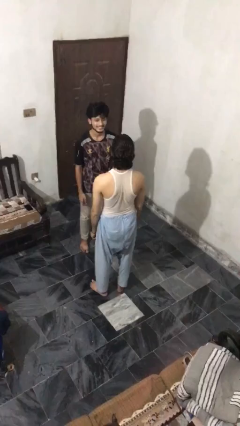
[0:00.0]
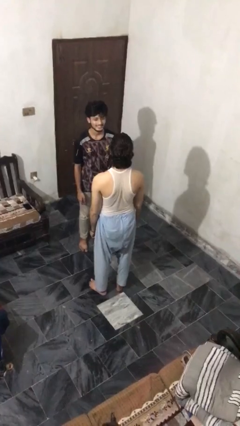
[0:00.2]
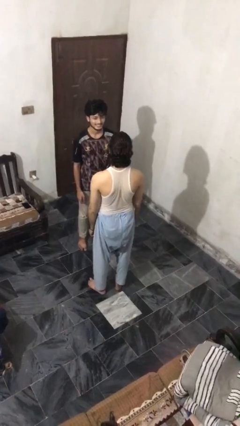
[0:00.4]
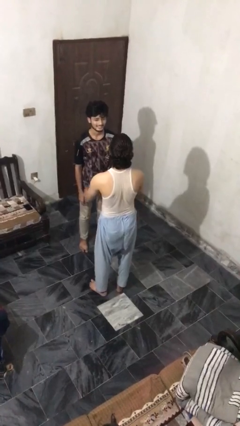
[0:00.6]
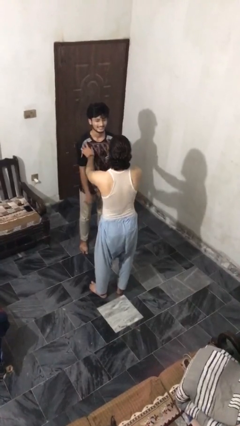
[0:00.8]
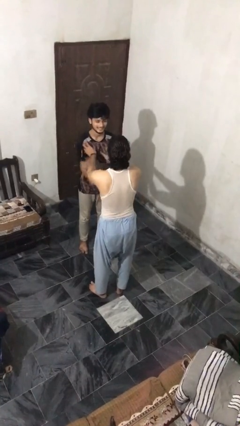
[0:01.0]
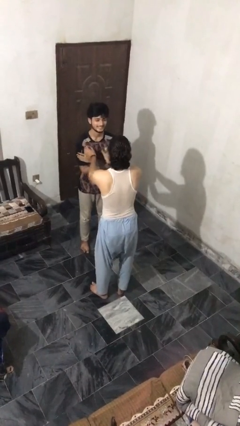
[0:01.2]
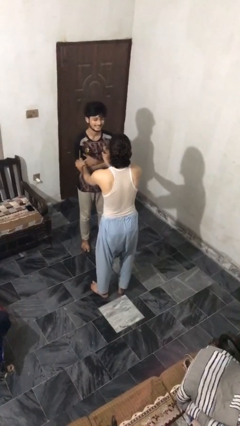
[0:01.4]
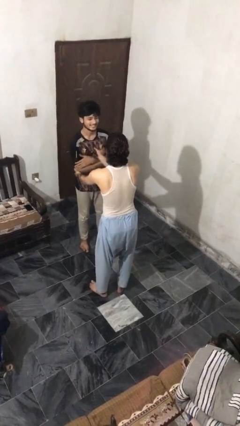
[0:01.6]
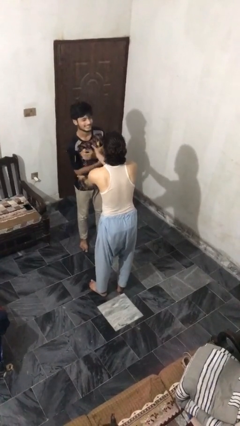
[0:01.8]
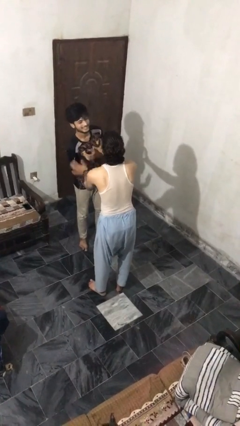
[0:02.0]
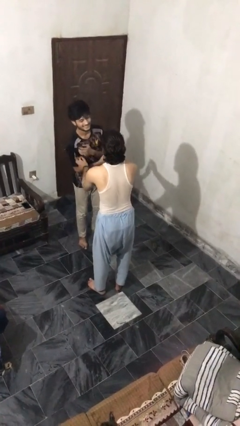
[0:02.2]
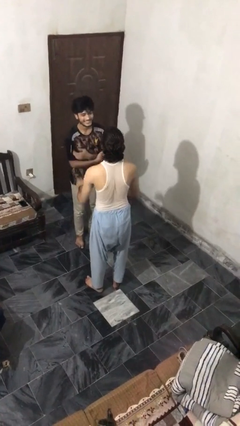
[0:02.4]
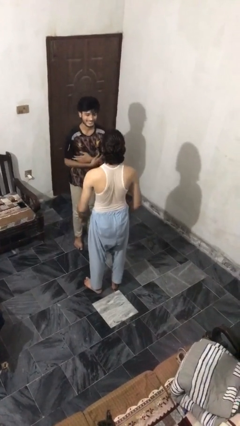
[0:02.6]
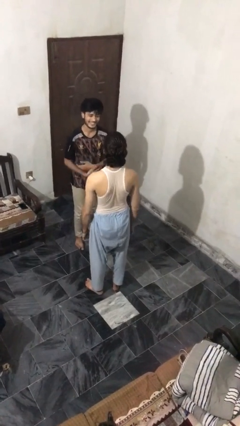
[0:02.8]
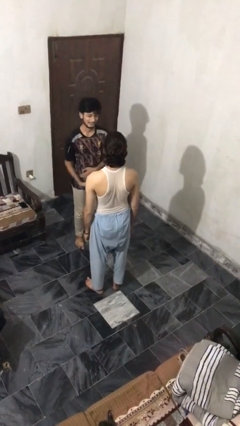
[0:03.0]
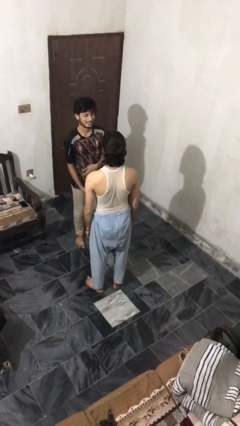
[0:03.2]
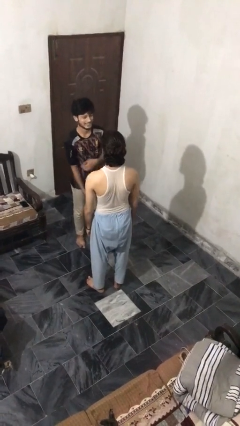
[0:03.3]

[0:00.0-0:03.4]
person tickles person

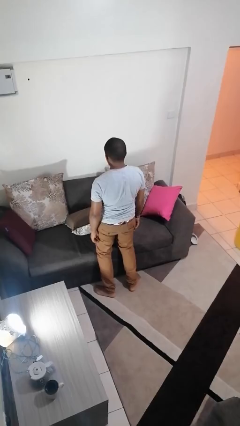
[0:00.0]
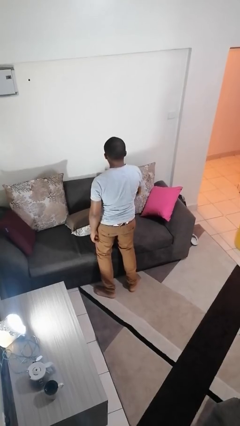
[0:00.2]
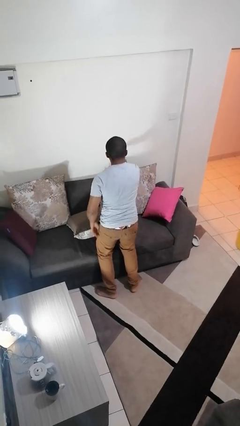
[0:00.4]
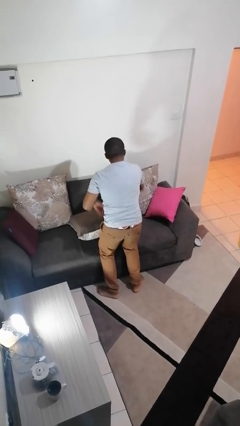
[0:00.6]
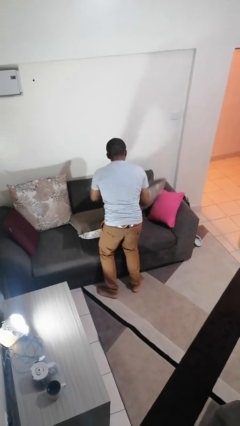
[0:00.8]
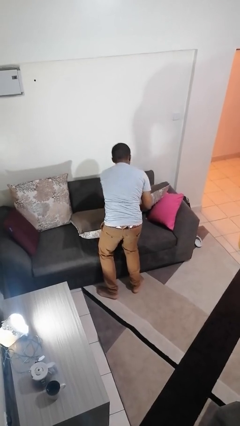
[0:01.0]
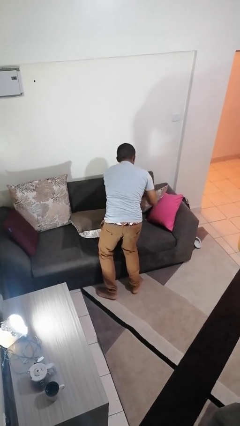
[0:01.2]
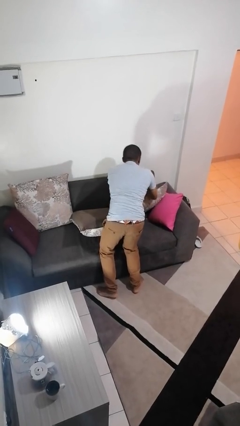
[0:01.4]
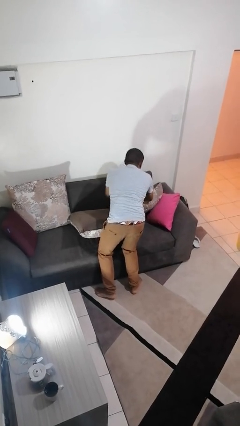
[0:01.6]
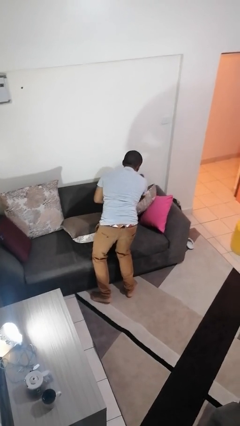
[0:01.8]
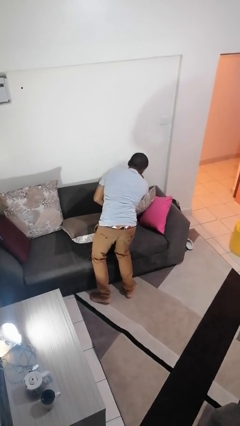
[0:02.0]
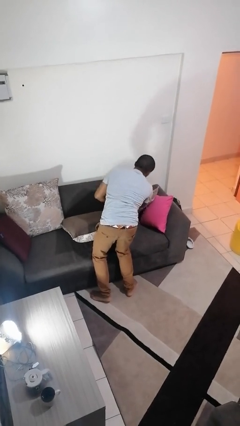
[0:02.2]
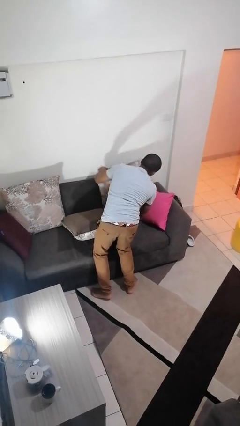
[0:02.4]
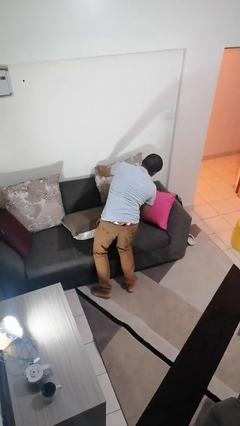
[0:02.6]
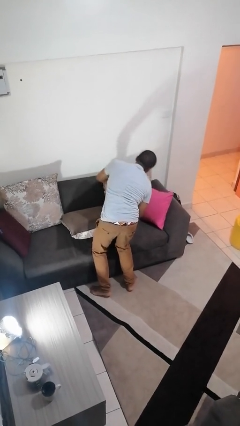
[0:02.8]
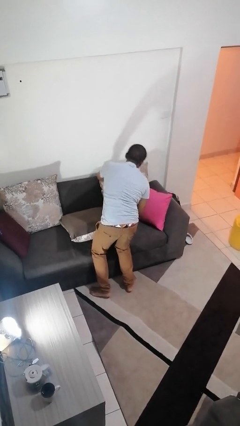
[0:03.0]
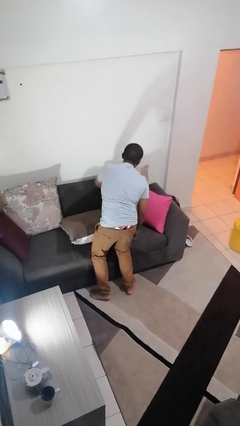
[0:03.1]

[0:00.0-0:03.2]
person searches in couch

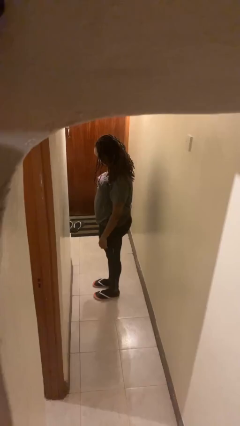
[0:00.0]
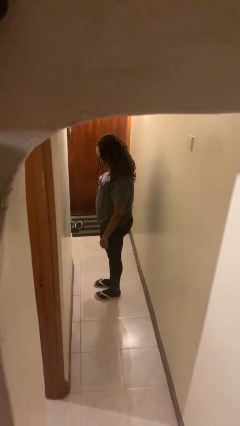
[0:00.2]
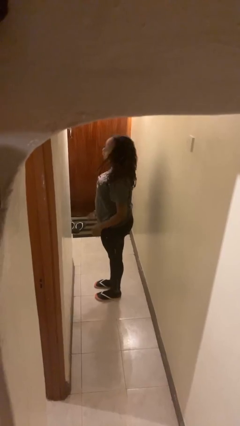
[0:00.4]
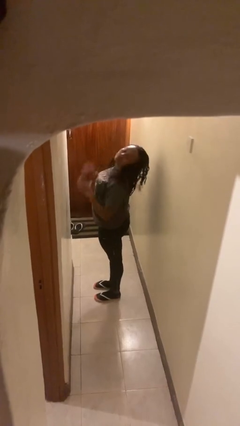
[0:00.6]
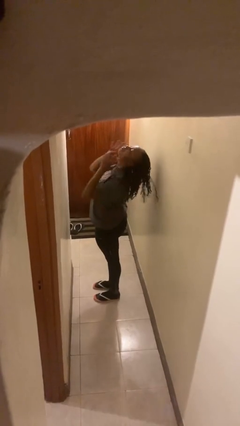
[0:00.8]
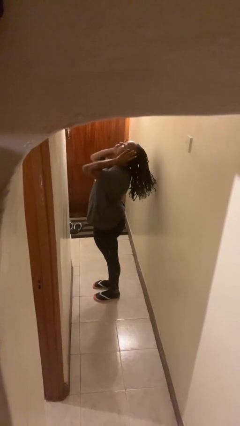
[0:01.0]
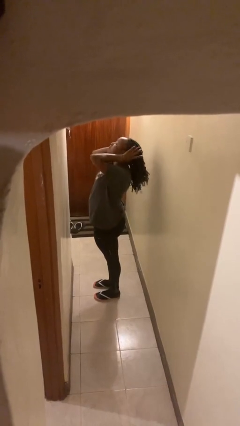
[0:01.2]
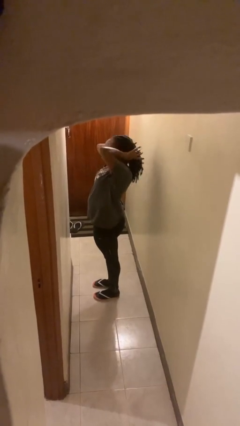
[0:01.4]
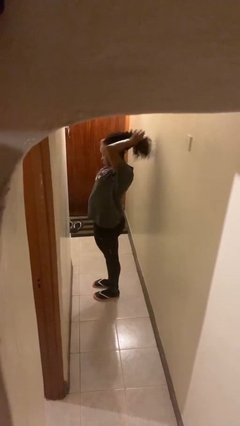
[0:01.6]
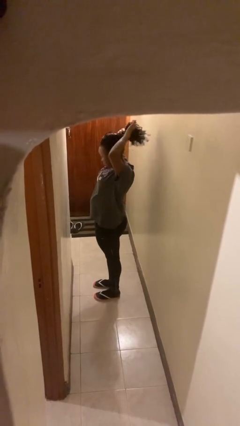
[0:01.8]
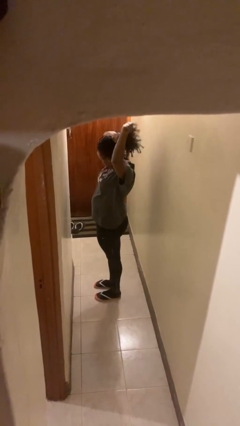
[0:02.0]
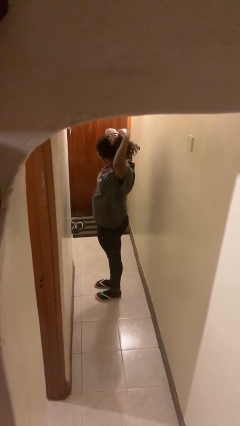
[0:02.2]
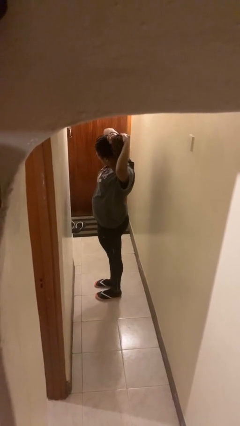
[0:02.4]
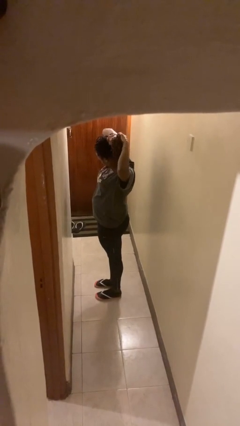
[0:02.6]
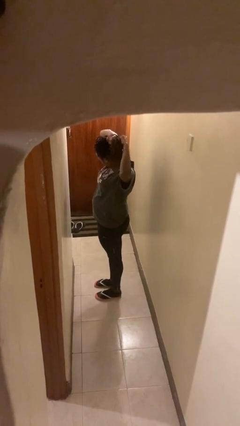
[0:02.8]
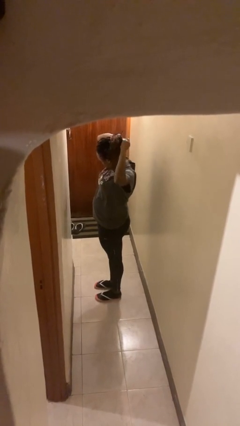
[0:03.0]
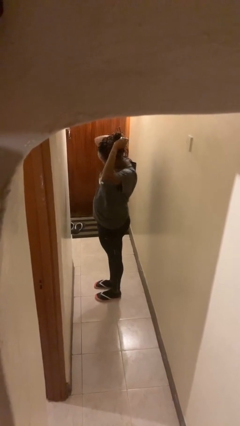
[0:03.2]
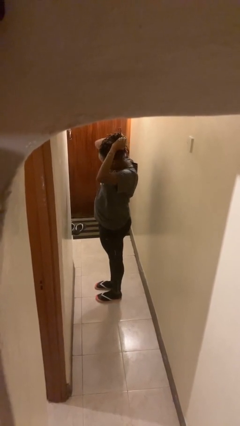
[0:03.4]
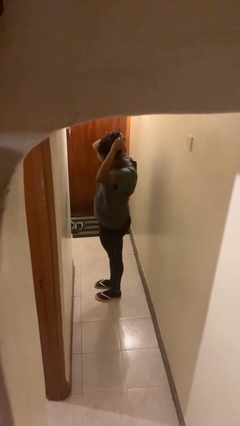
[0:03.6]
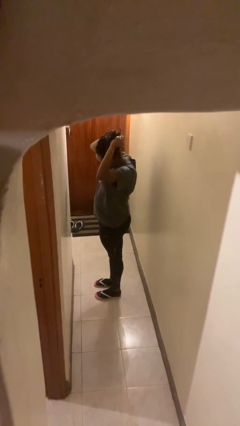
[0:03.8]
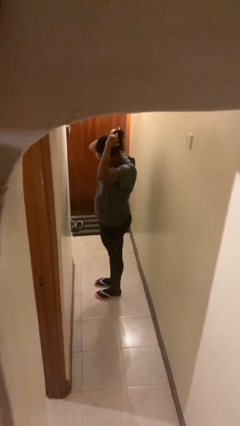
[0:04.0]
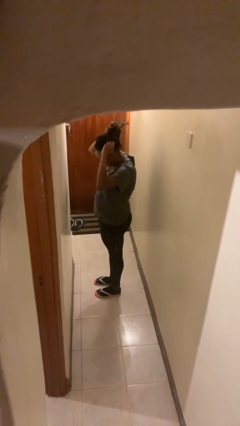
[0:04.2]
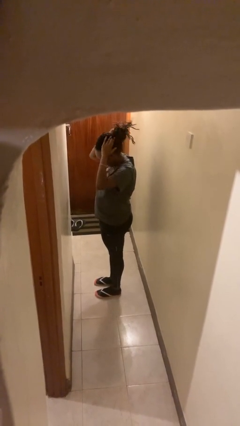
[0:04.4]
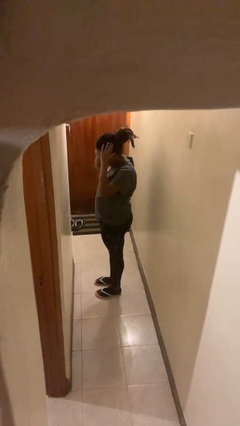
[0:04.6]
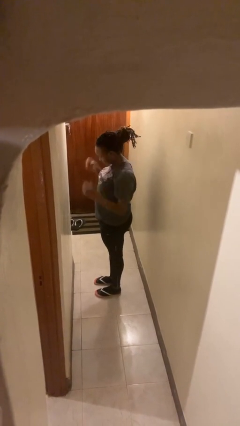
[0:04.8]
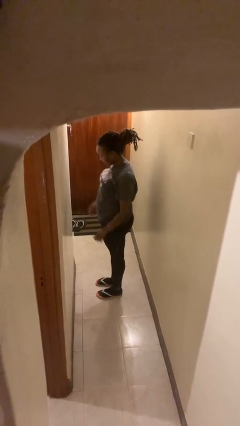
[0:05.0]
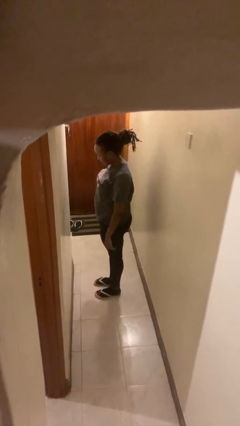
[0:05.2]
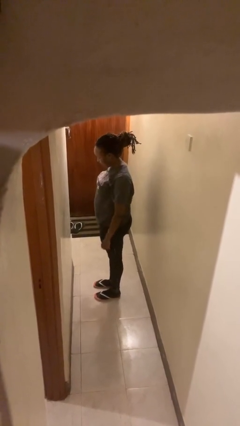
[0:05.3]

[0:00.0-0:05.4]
person puts hair in ponytail

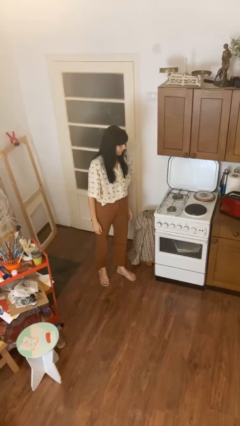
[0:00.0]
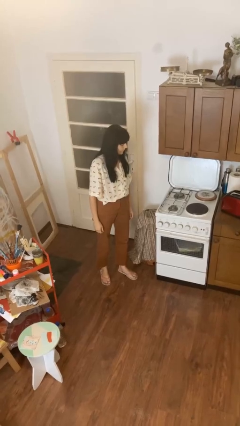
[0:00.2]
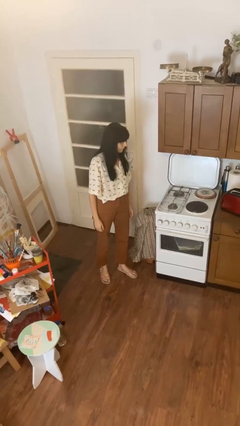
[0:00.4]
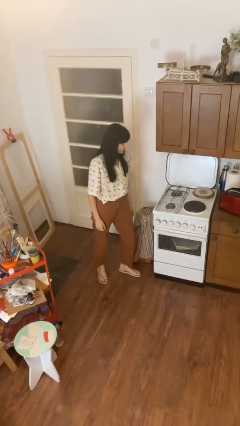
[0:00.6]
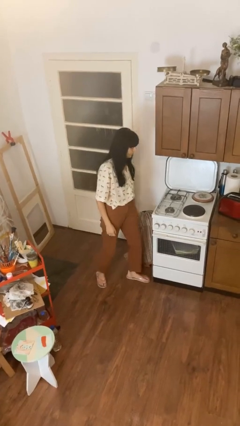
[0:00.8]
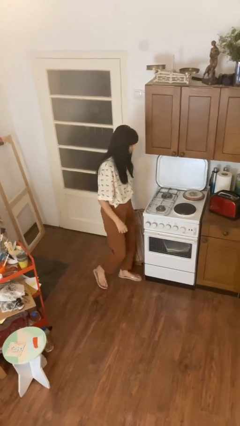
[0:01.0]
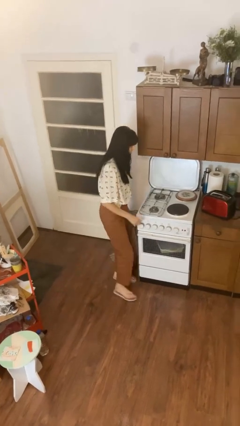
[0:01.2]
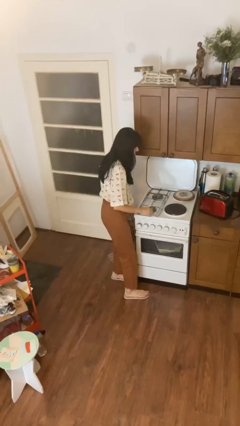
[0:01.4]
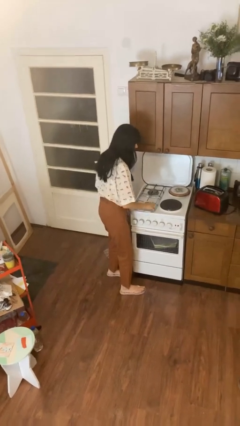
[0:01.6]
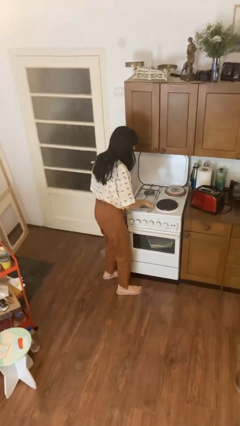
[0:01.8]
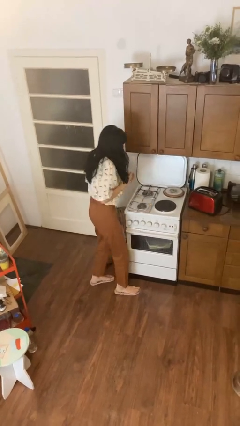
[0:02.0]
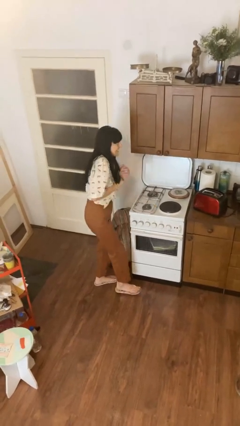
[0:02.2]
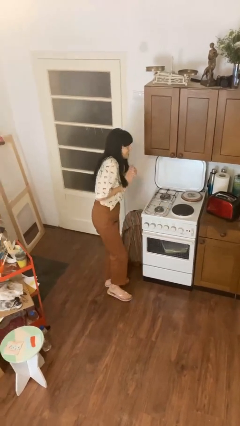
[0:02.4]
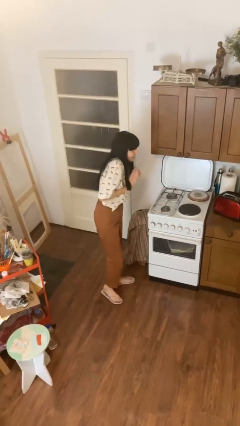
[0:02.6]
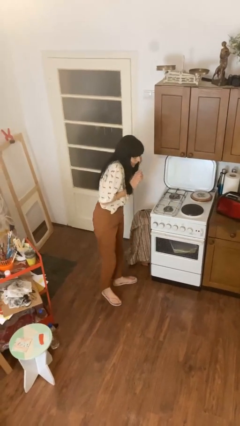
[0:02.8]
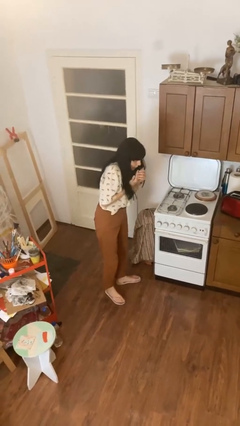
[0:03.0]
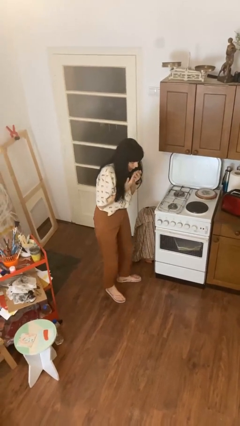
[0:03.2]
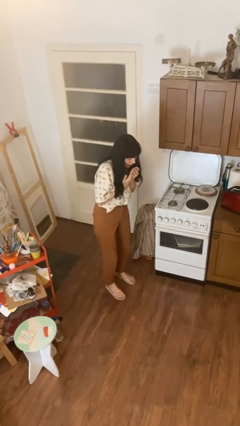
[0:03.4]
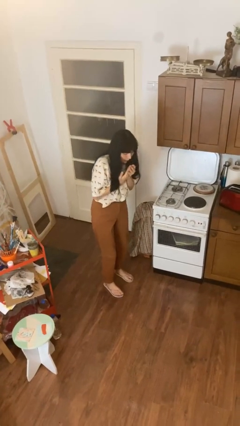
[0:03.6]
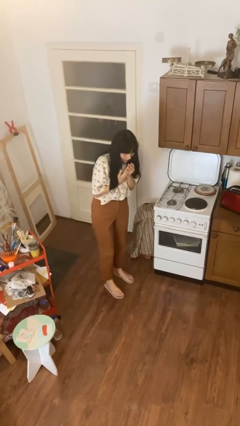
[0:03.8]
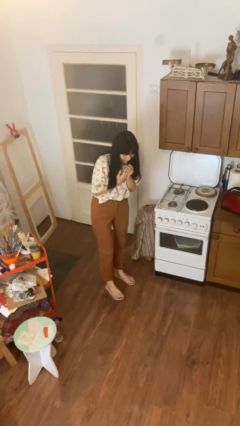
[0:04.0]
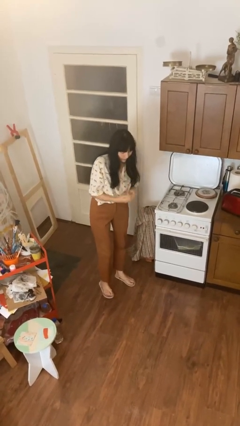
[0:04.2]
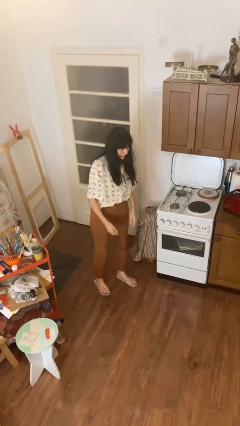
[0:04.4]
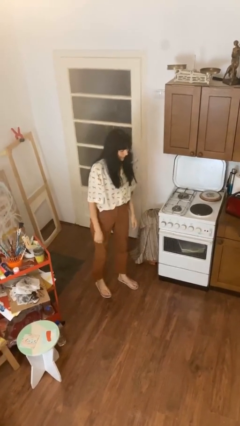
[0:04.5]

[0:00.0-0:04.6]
person burns hand

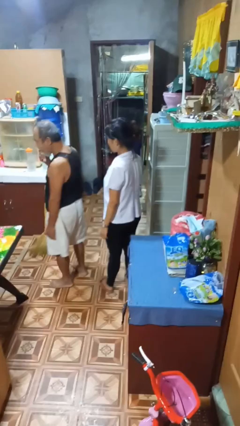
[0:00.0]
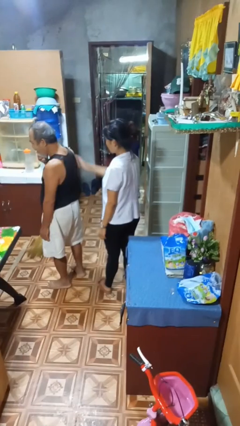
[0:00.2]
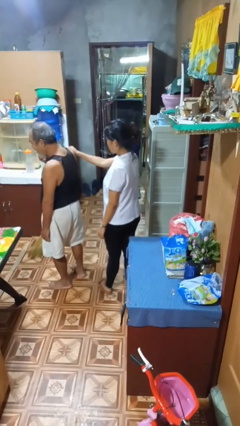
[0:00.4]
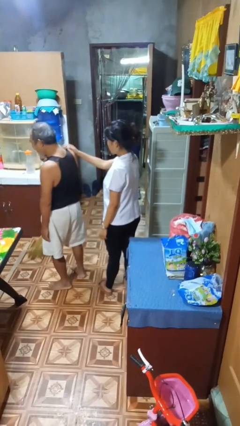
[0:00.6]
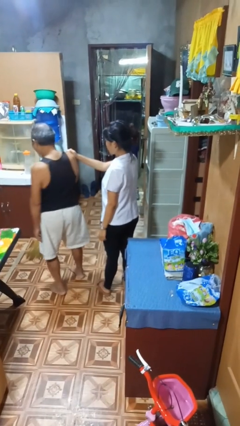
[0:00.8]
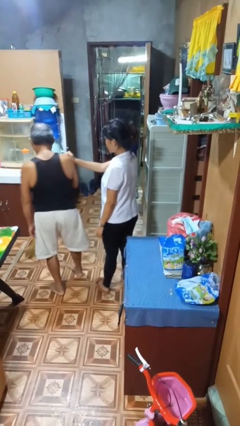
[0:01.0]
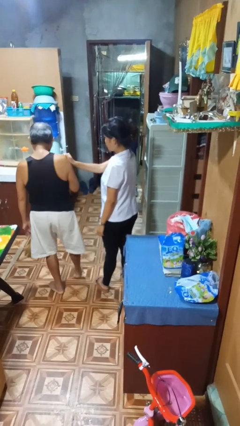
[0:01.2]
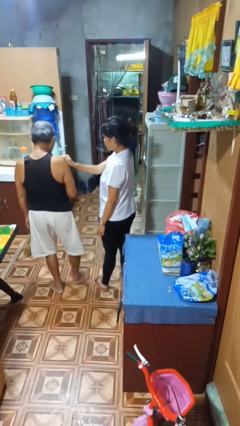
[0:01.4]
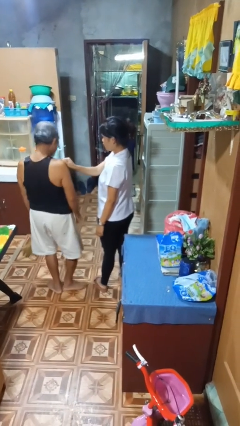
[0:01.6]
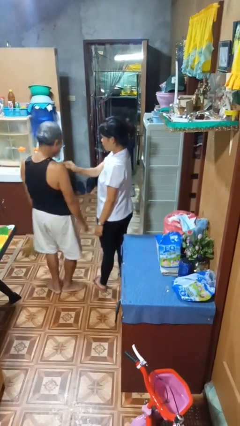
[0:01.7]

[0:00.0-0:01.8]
person grabs person by shoulder
